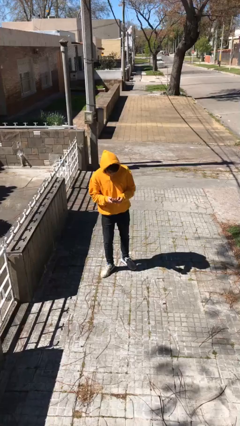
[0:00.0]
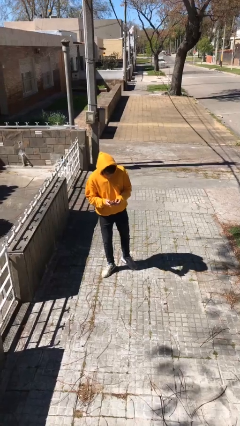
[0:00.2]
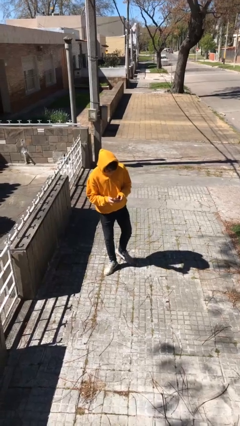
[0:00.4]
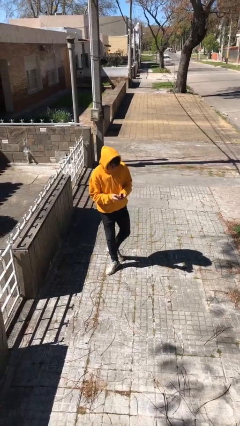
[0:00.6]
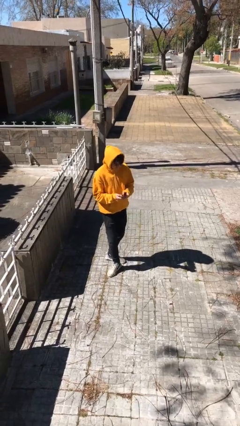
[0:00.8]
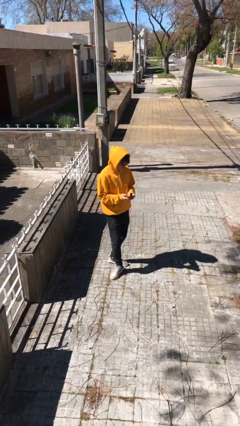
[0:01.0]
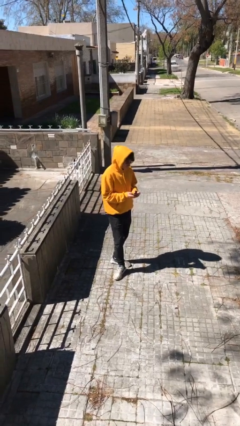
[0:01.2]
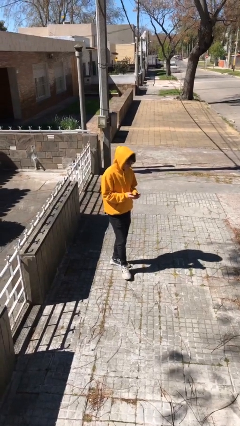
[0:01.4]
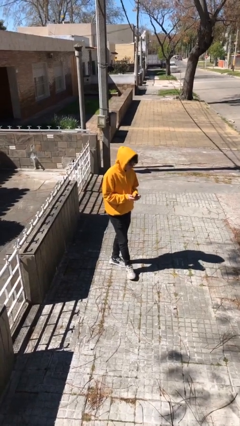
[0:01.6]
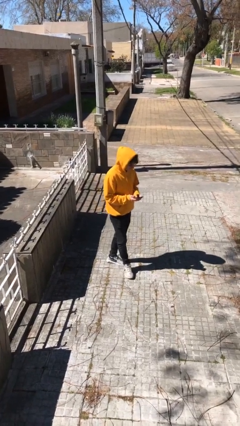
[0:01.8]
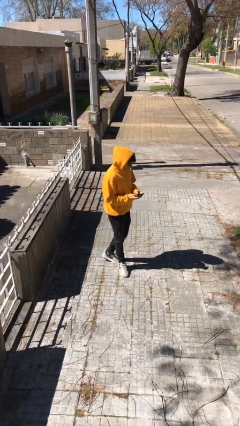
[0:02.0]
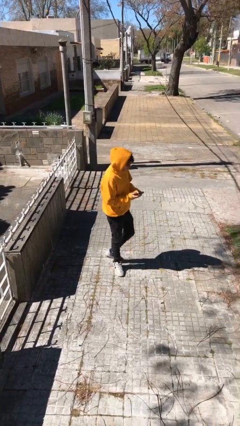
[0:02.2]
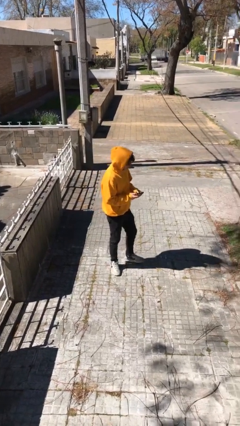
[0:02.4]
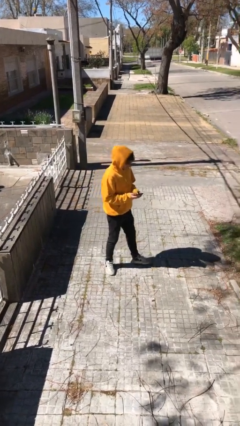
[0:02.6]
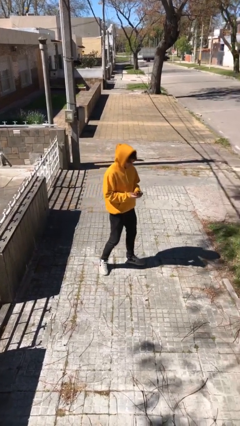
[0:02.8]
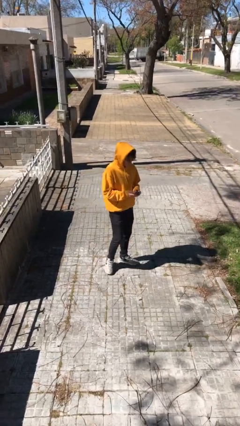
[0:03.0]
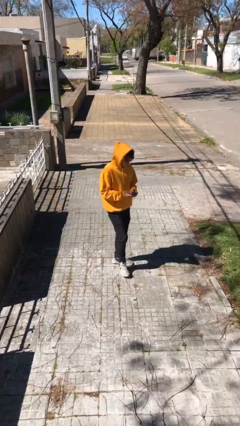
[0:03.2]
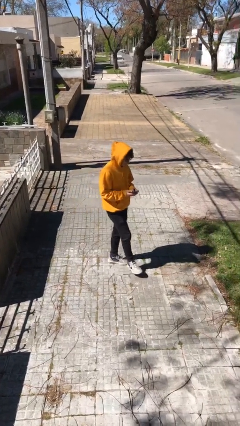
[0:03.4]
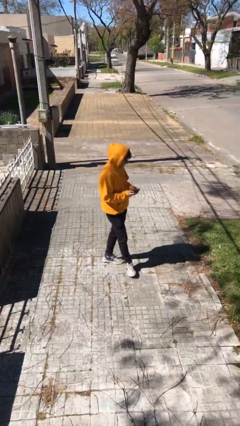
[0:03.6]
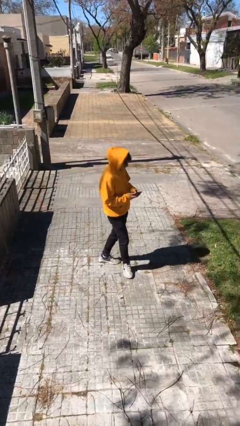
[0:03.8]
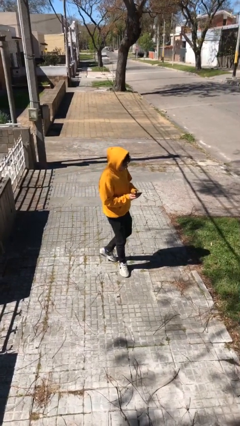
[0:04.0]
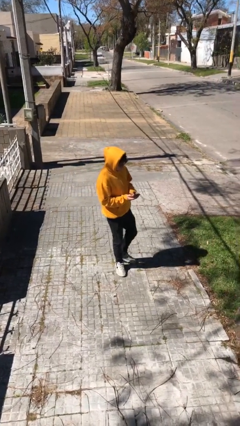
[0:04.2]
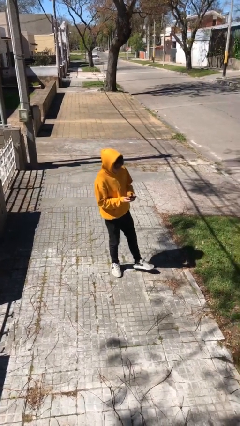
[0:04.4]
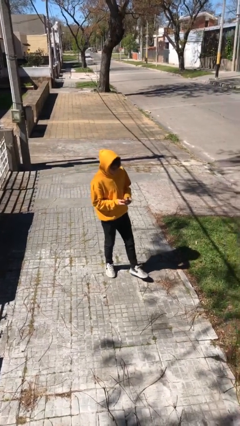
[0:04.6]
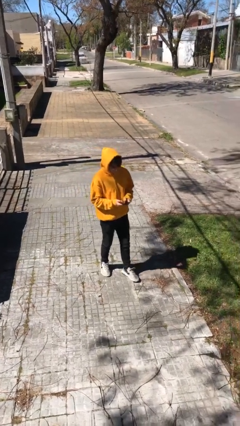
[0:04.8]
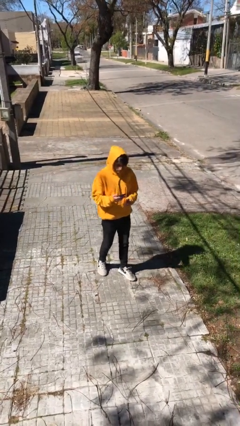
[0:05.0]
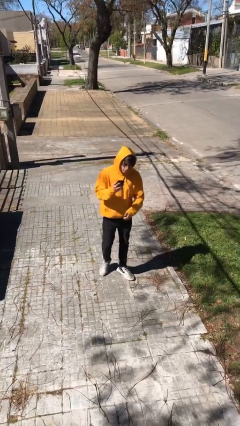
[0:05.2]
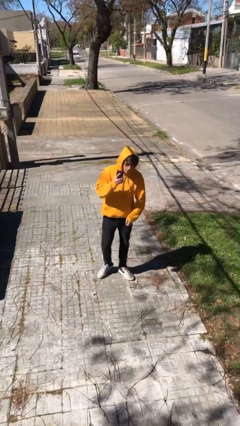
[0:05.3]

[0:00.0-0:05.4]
person texts on phone

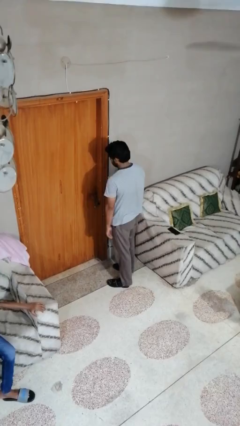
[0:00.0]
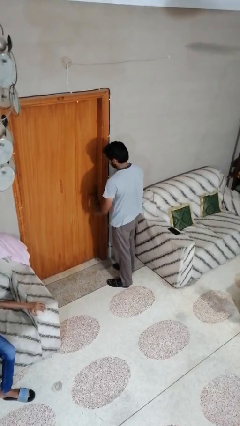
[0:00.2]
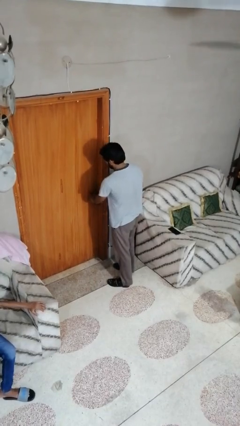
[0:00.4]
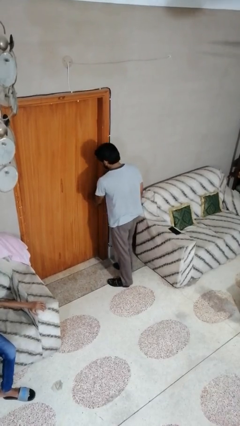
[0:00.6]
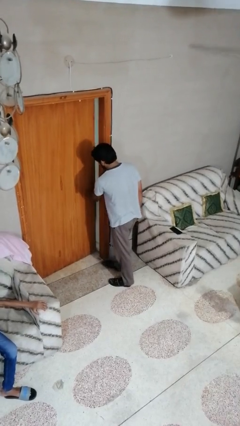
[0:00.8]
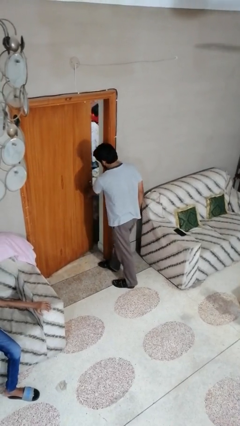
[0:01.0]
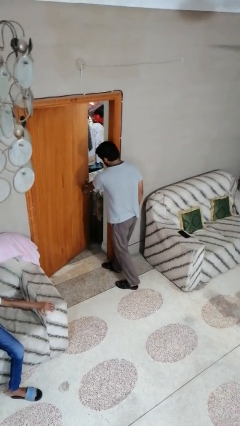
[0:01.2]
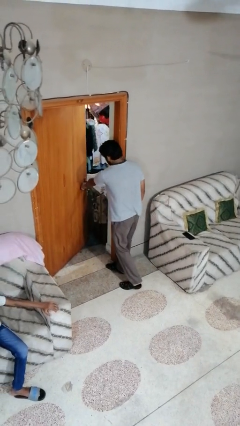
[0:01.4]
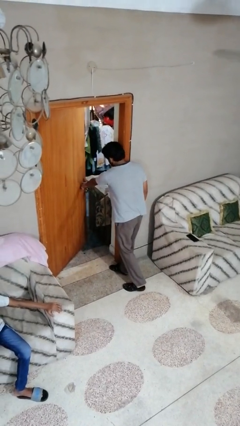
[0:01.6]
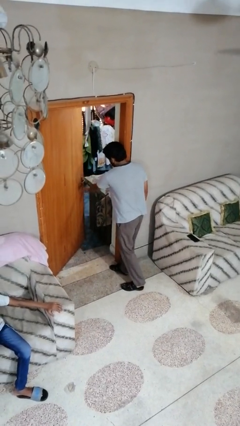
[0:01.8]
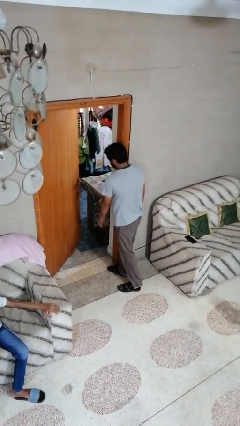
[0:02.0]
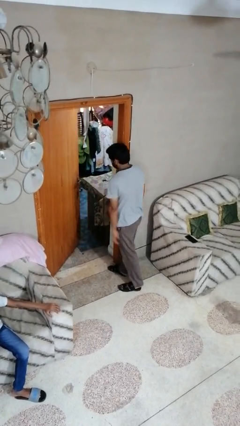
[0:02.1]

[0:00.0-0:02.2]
person opens facility door

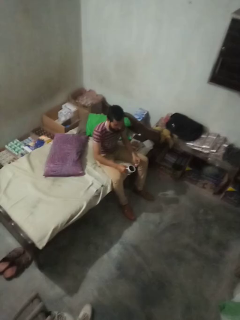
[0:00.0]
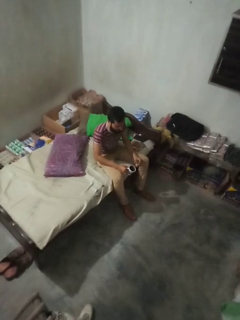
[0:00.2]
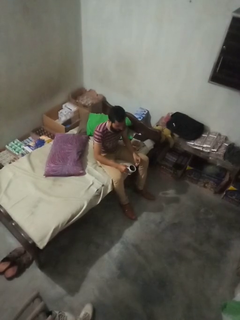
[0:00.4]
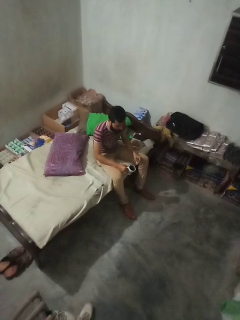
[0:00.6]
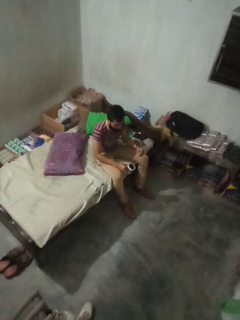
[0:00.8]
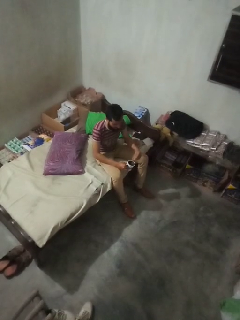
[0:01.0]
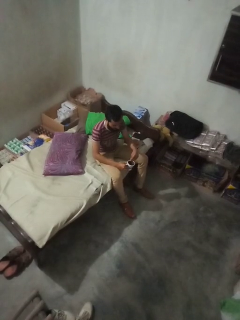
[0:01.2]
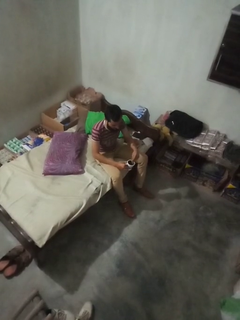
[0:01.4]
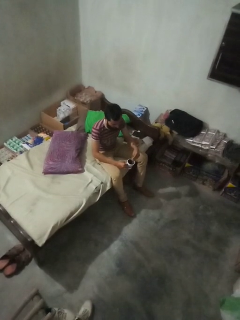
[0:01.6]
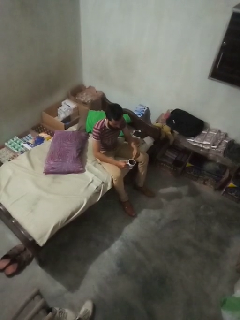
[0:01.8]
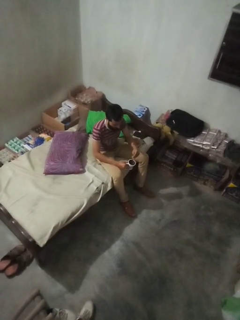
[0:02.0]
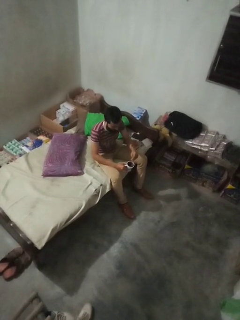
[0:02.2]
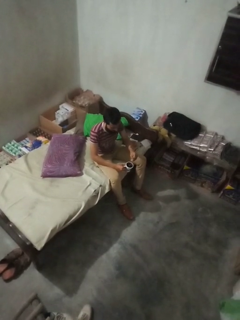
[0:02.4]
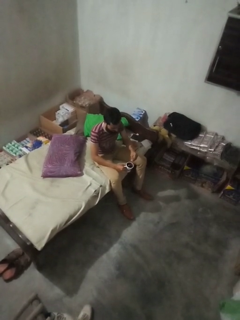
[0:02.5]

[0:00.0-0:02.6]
person stirs mug

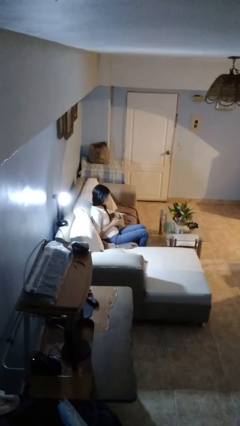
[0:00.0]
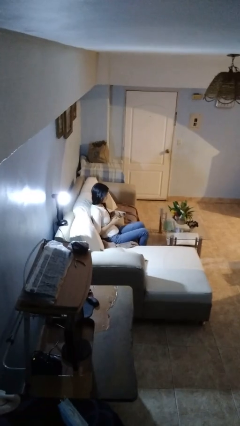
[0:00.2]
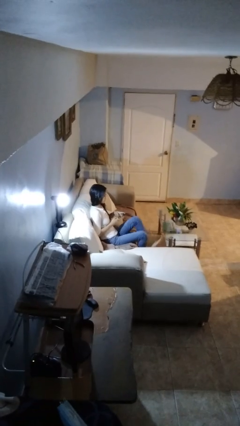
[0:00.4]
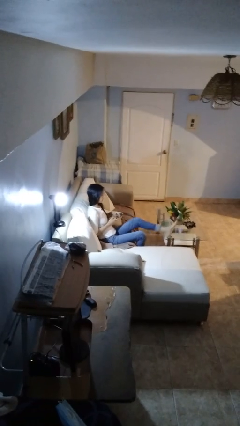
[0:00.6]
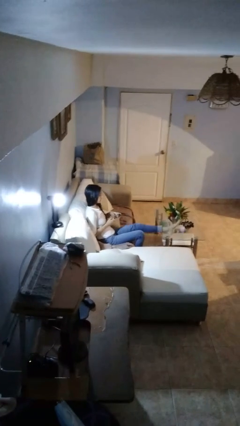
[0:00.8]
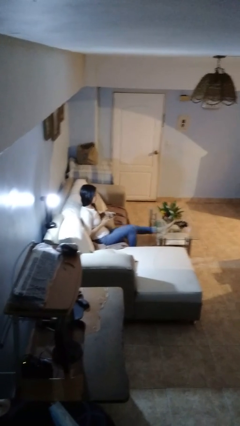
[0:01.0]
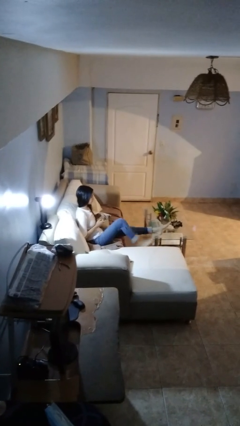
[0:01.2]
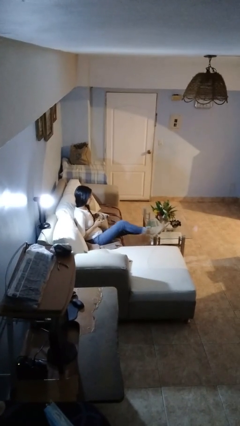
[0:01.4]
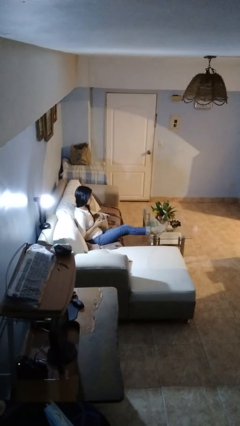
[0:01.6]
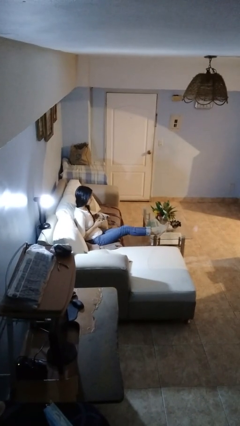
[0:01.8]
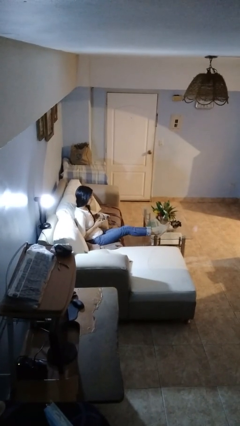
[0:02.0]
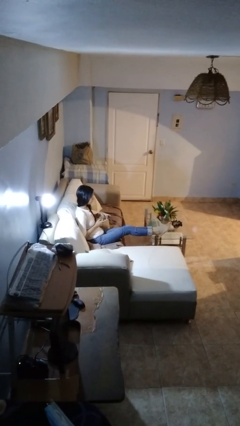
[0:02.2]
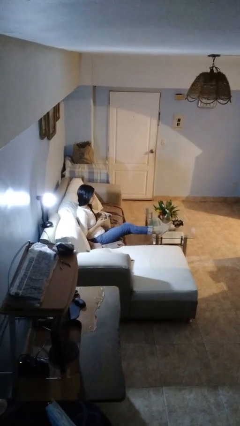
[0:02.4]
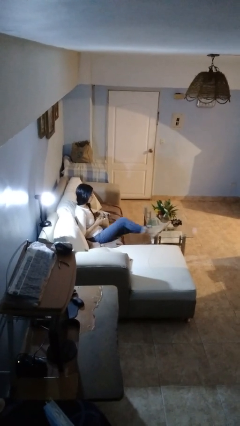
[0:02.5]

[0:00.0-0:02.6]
person puts feet up

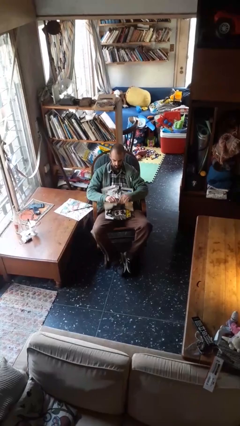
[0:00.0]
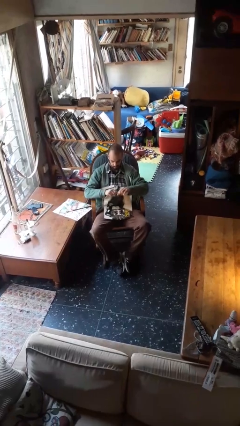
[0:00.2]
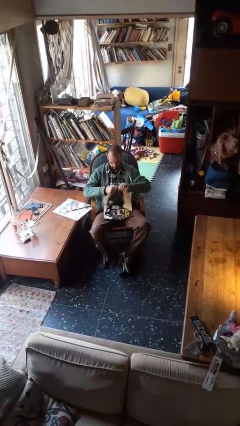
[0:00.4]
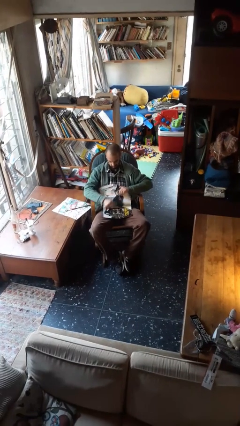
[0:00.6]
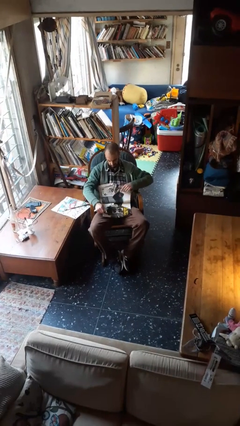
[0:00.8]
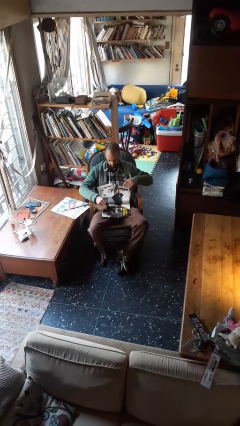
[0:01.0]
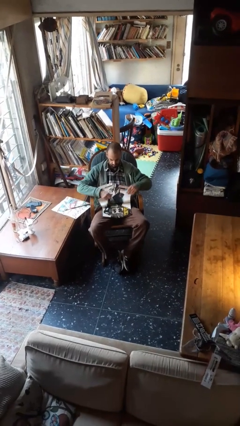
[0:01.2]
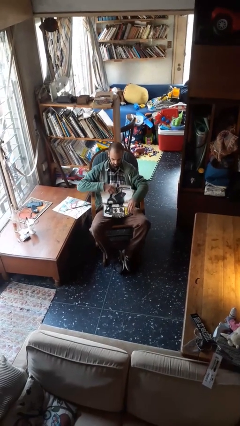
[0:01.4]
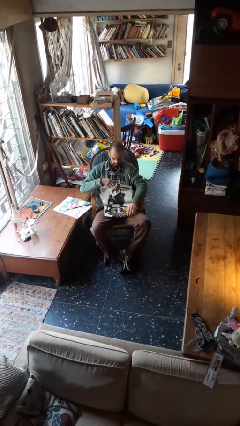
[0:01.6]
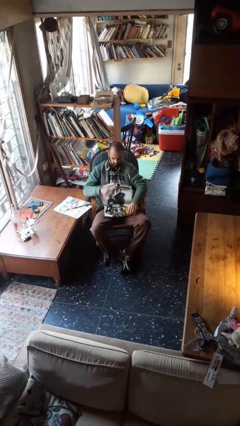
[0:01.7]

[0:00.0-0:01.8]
person tears paper

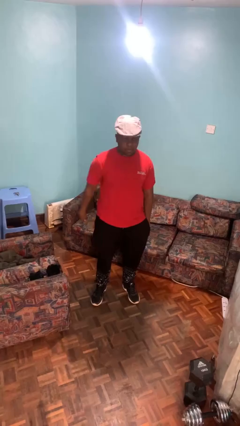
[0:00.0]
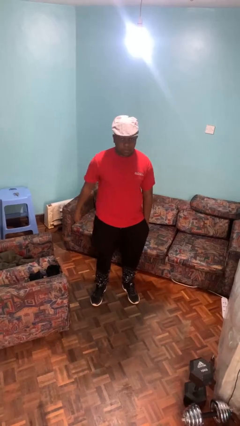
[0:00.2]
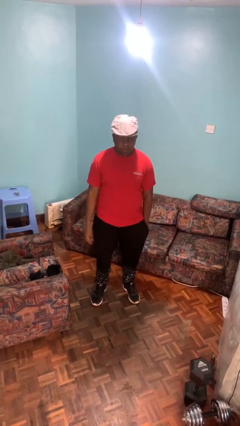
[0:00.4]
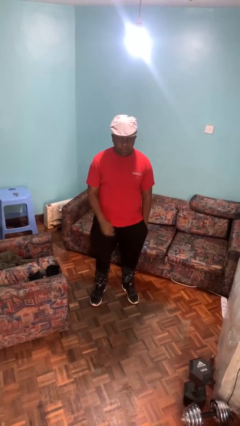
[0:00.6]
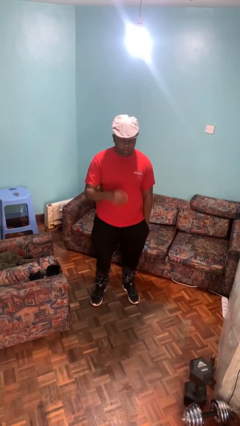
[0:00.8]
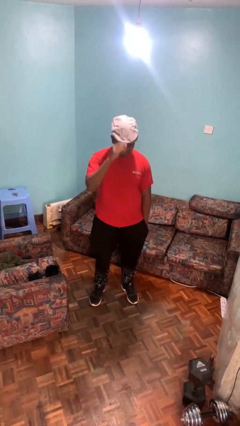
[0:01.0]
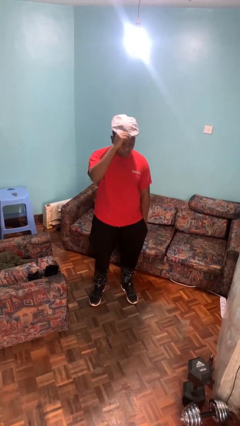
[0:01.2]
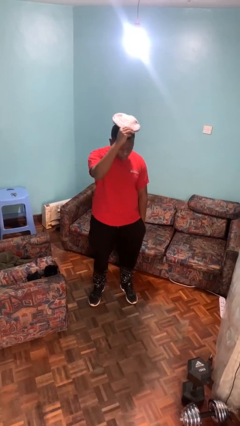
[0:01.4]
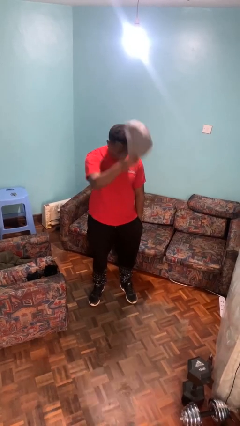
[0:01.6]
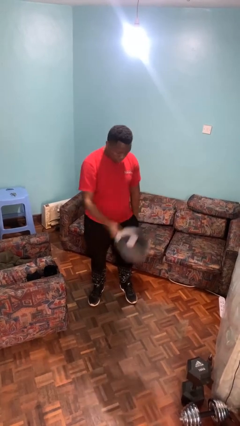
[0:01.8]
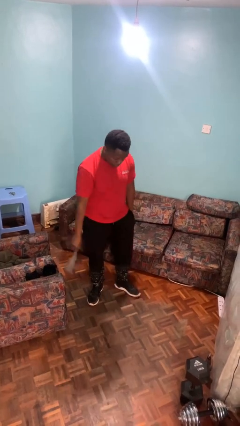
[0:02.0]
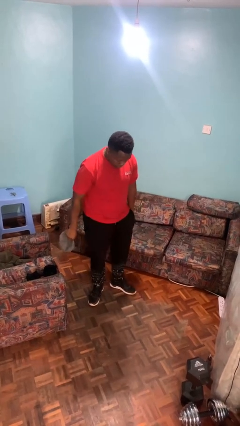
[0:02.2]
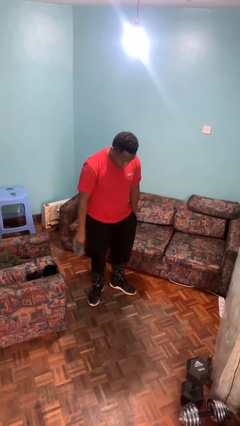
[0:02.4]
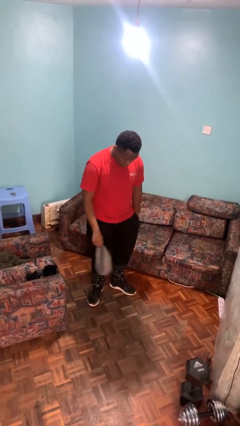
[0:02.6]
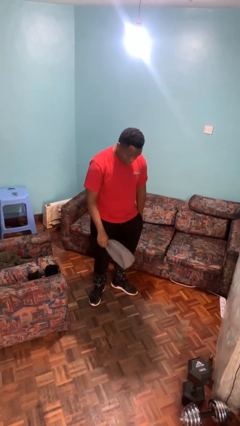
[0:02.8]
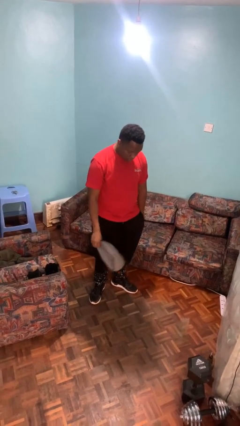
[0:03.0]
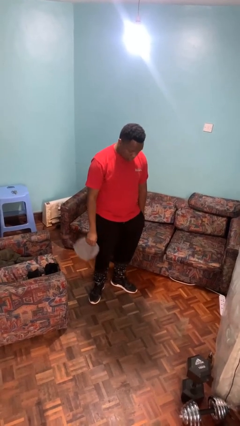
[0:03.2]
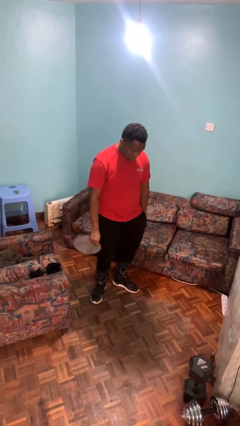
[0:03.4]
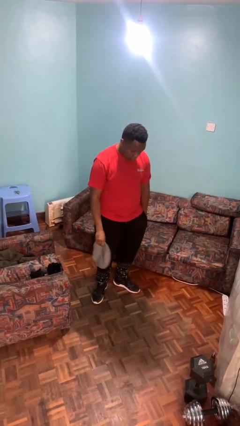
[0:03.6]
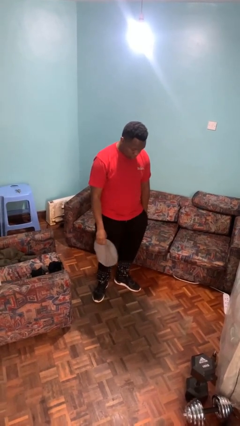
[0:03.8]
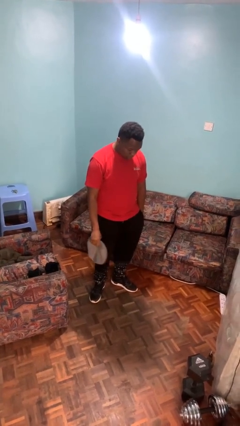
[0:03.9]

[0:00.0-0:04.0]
person takes off hat
